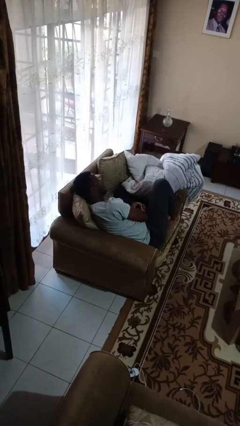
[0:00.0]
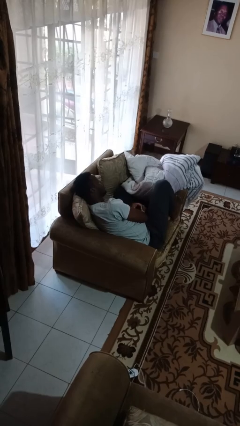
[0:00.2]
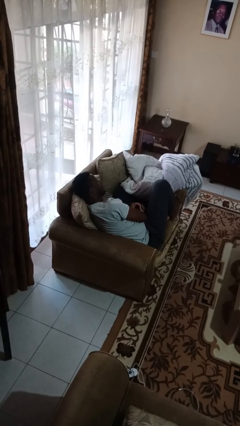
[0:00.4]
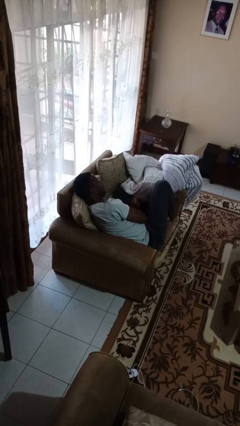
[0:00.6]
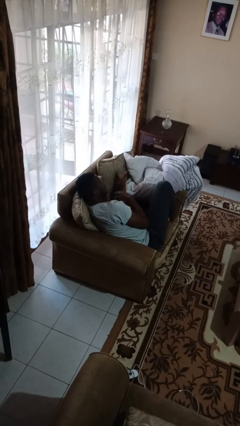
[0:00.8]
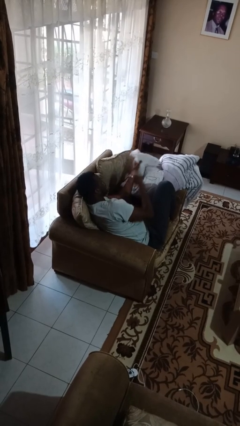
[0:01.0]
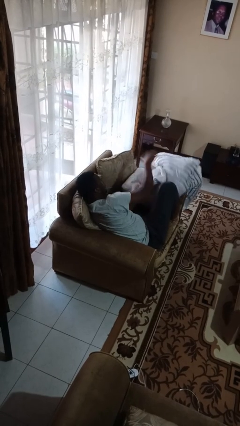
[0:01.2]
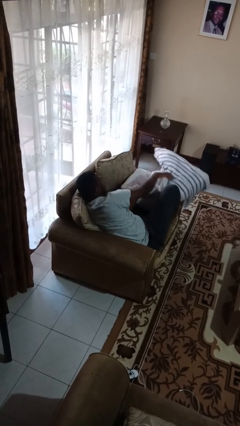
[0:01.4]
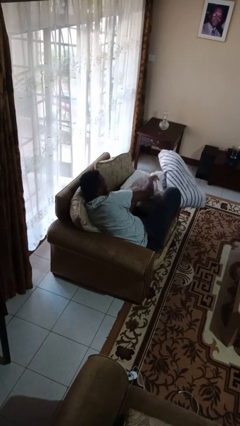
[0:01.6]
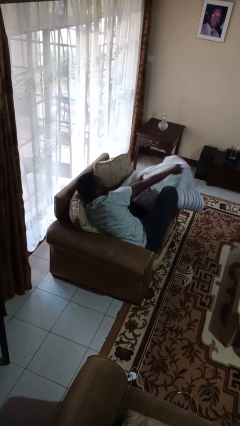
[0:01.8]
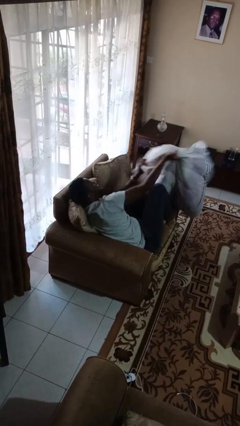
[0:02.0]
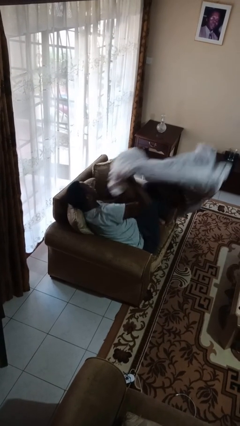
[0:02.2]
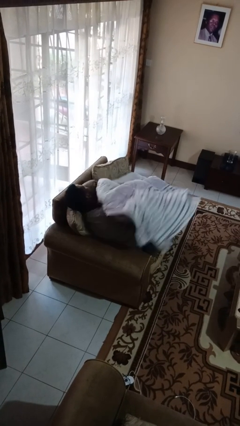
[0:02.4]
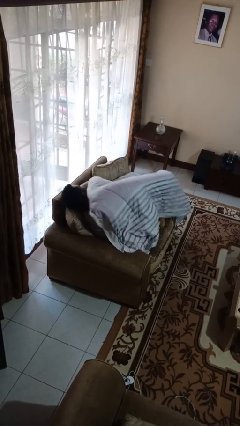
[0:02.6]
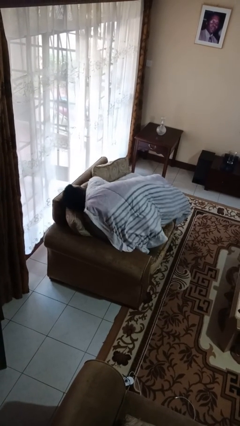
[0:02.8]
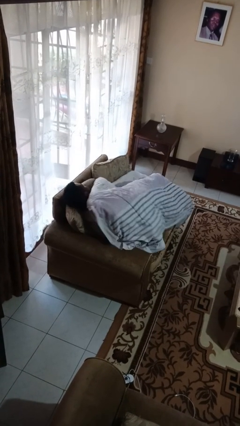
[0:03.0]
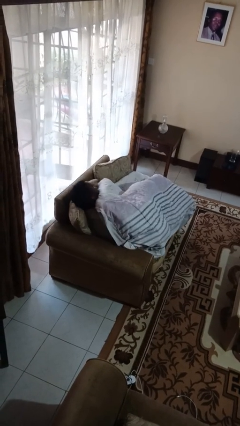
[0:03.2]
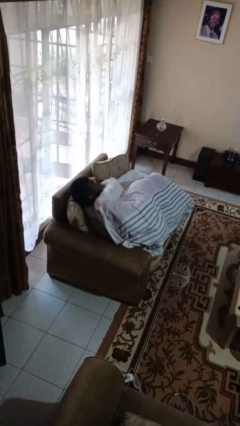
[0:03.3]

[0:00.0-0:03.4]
person covers with blanket

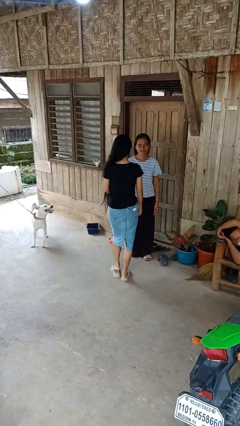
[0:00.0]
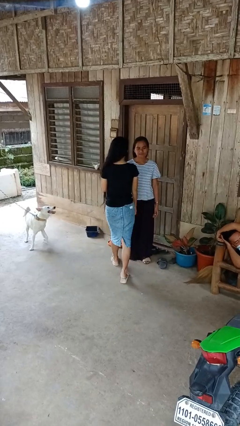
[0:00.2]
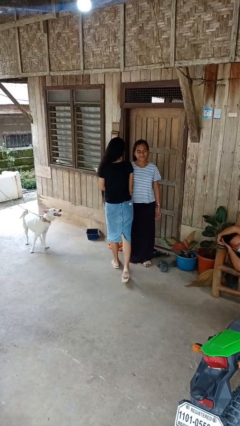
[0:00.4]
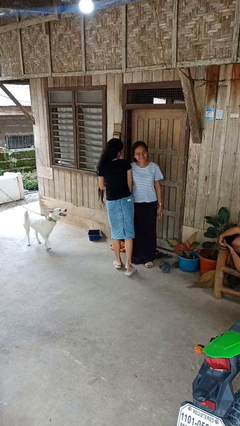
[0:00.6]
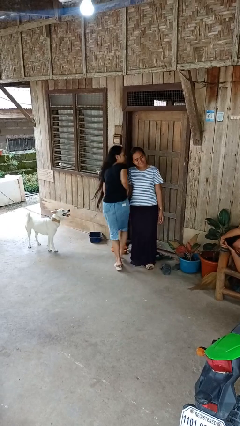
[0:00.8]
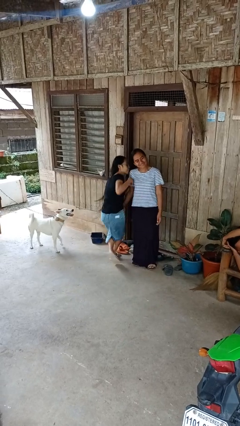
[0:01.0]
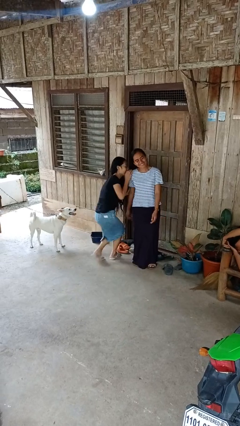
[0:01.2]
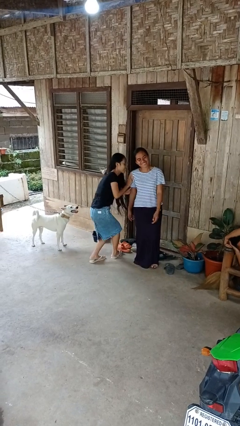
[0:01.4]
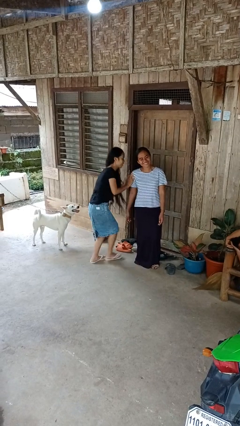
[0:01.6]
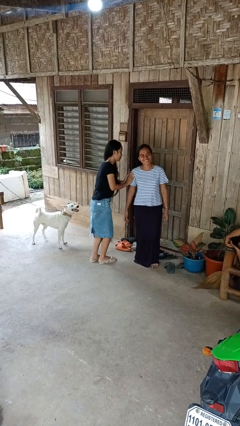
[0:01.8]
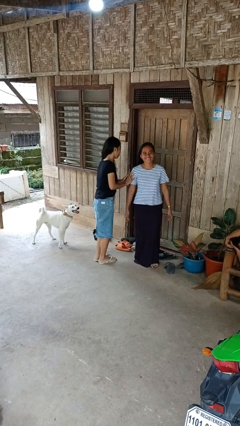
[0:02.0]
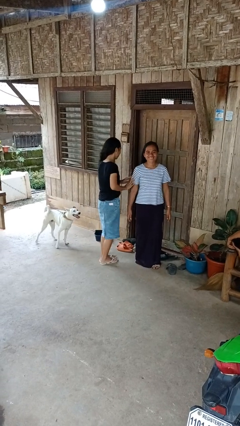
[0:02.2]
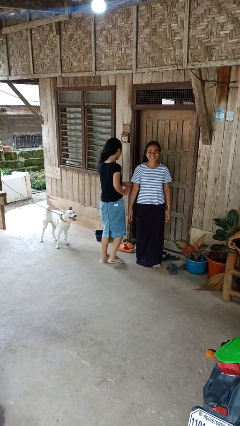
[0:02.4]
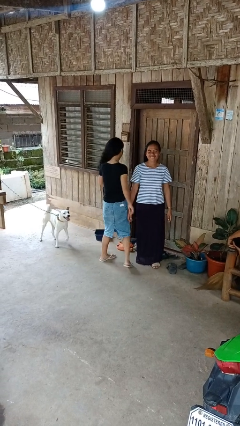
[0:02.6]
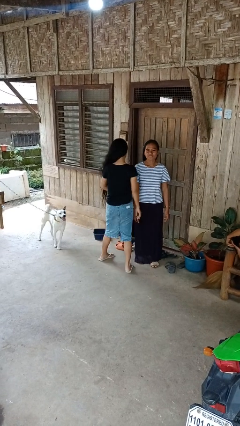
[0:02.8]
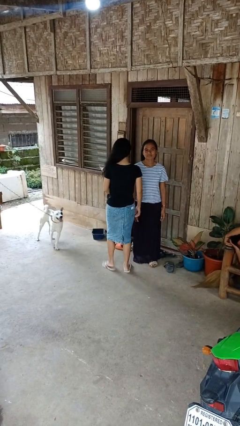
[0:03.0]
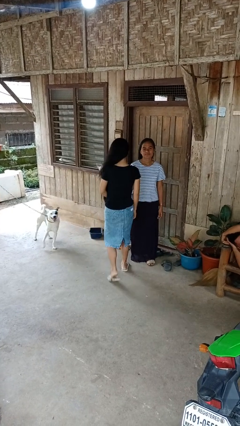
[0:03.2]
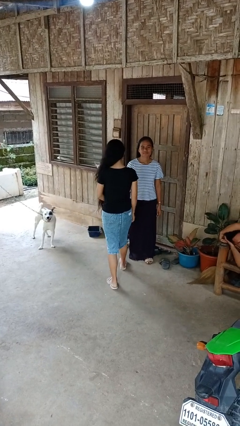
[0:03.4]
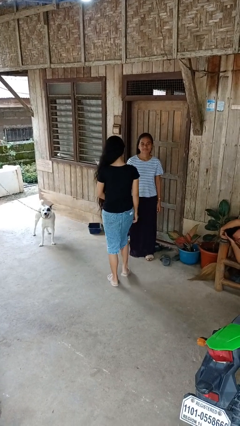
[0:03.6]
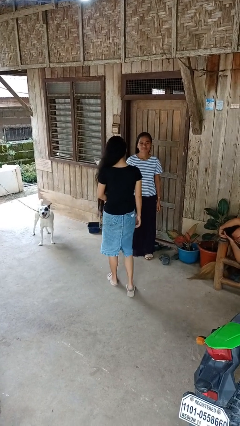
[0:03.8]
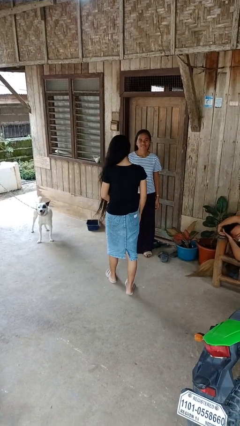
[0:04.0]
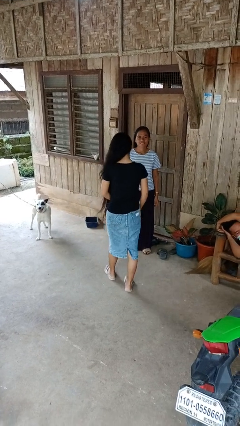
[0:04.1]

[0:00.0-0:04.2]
person bumps into person

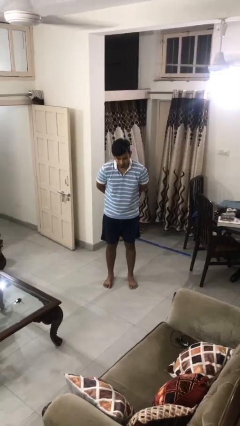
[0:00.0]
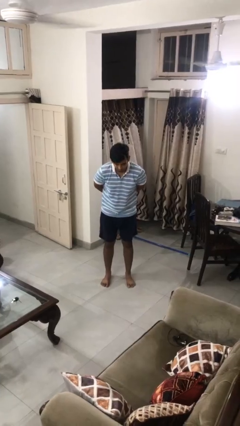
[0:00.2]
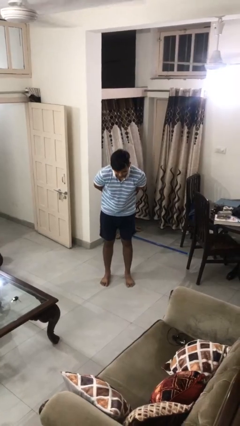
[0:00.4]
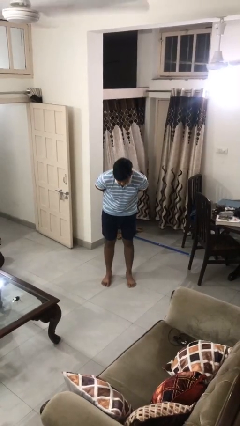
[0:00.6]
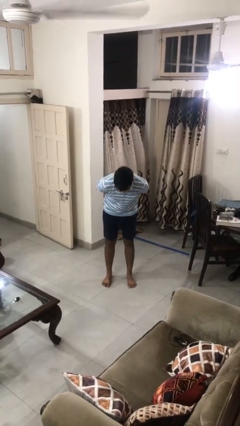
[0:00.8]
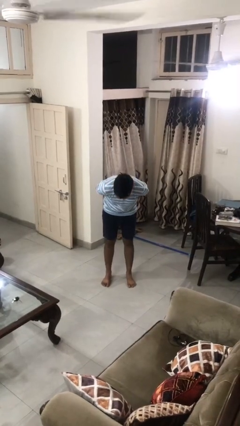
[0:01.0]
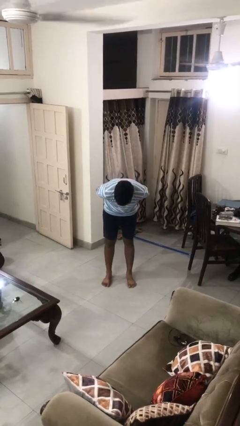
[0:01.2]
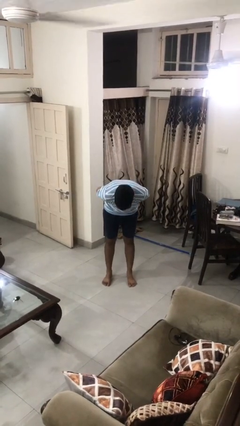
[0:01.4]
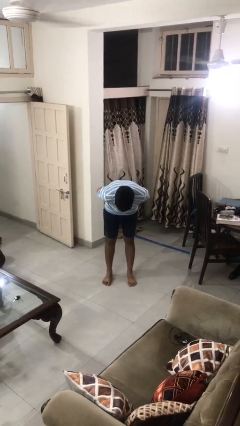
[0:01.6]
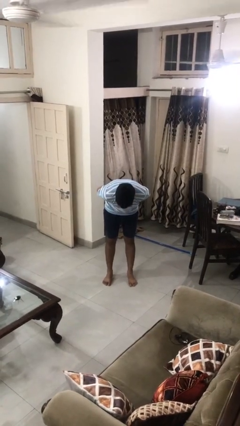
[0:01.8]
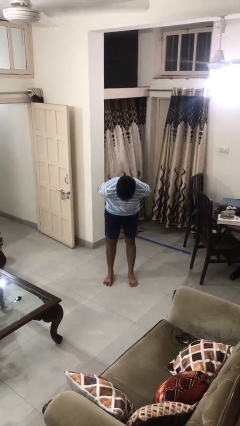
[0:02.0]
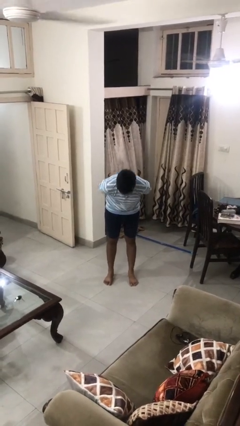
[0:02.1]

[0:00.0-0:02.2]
person bows

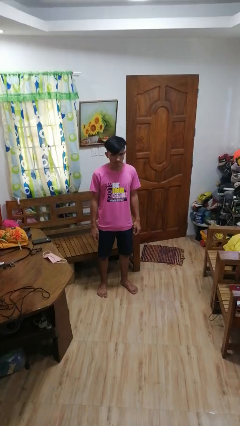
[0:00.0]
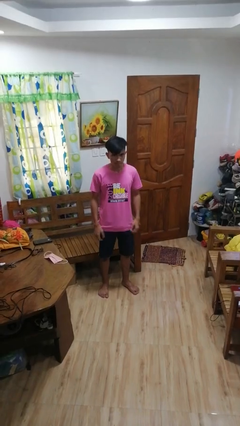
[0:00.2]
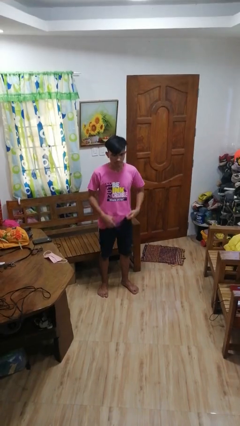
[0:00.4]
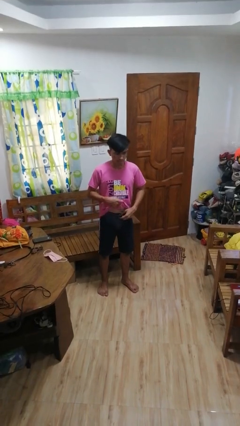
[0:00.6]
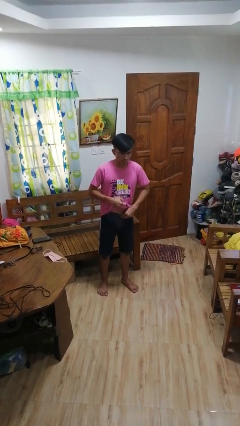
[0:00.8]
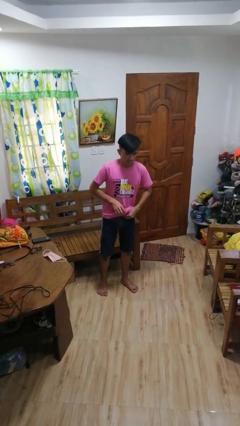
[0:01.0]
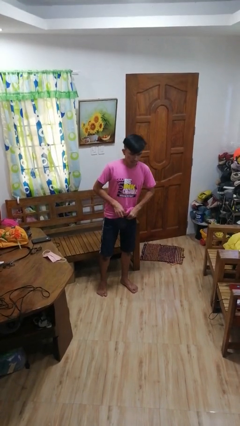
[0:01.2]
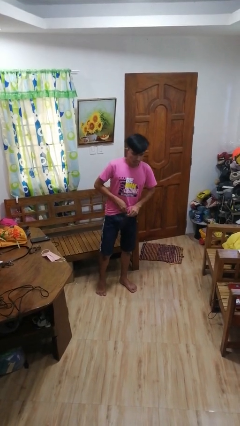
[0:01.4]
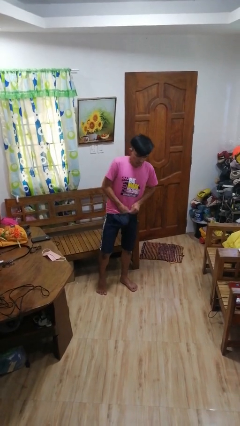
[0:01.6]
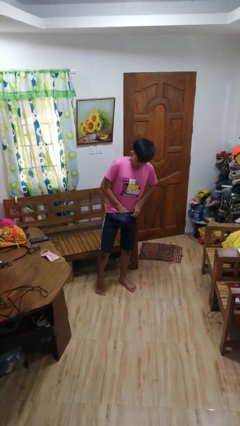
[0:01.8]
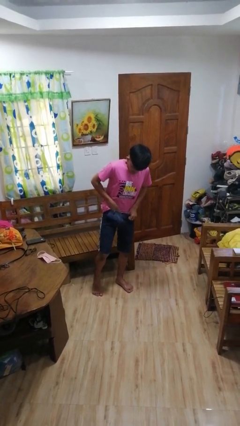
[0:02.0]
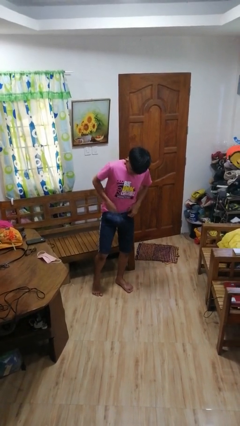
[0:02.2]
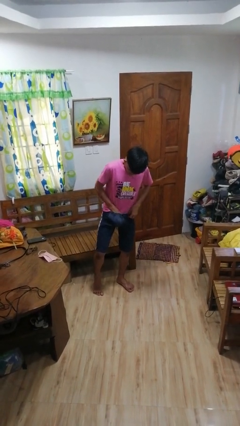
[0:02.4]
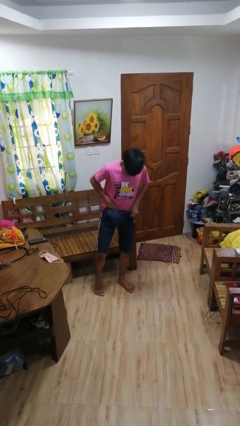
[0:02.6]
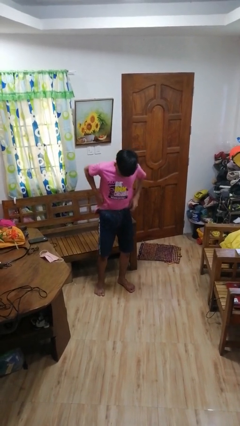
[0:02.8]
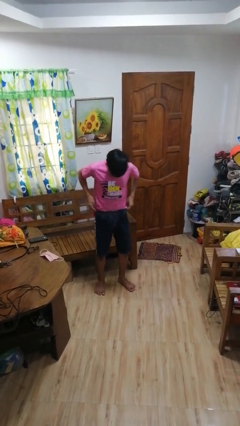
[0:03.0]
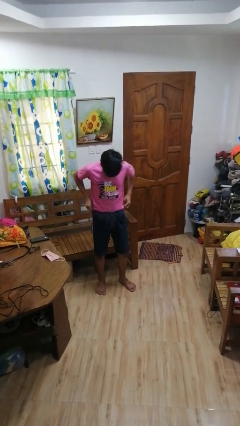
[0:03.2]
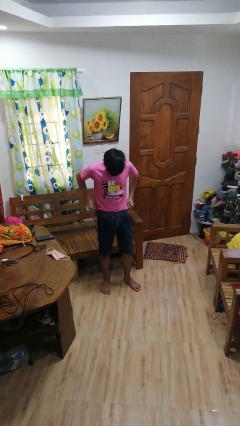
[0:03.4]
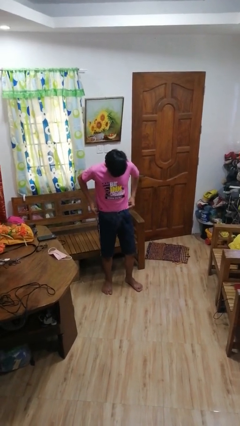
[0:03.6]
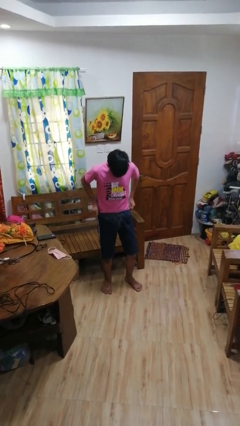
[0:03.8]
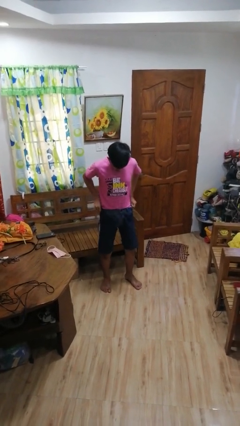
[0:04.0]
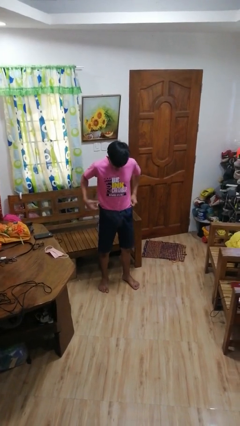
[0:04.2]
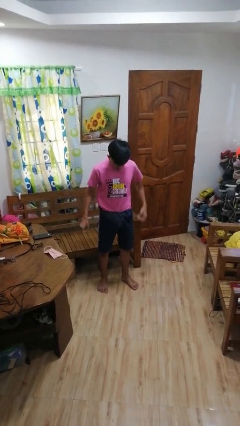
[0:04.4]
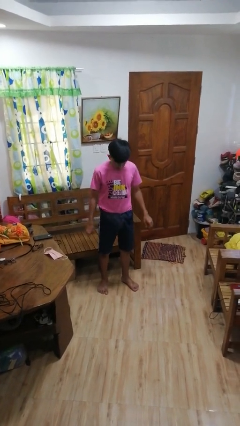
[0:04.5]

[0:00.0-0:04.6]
person tucks in shirt

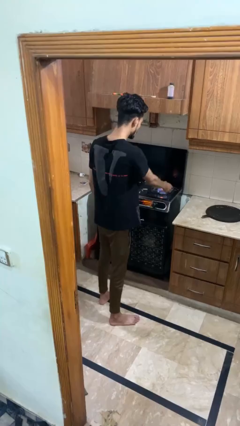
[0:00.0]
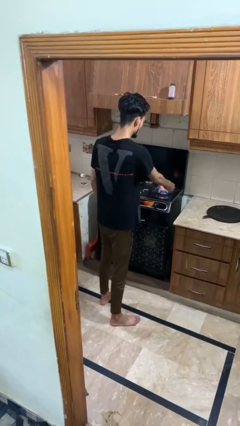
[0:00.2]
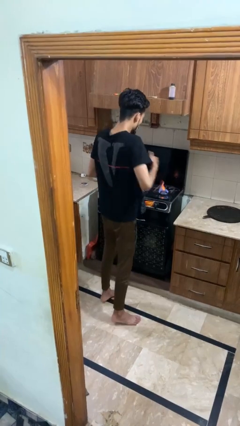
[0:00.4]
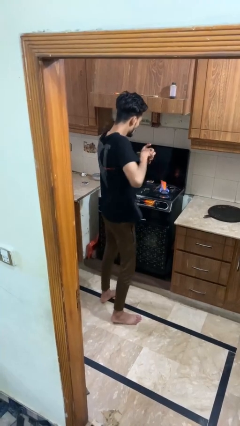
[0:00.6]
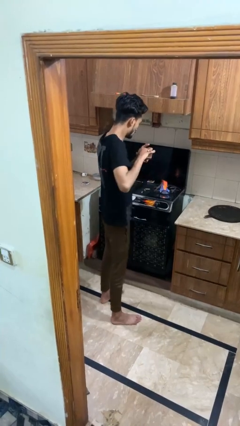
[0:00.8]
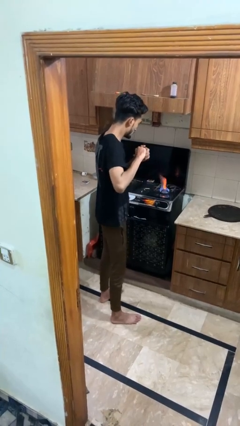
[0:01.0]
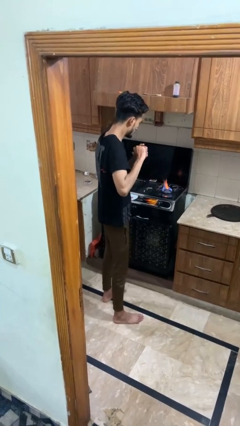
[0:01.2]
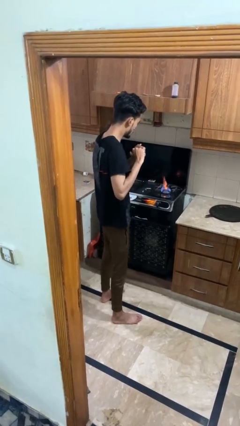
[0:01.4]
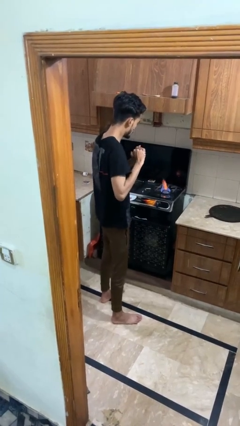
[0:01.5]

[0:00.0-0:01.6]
person burns hand

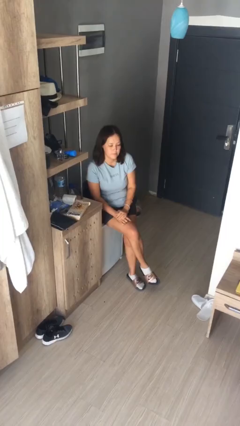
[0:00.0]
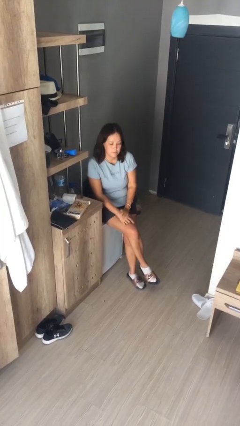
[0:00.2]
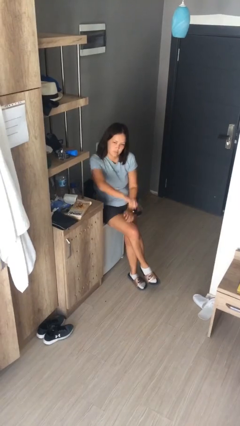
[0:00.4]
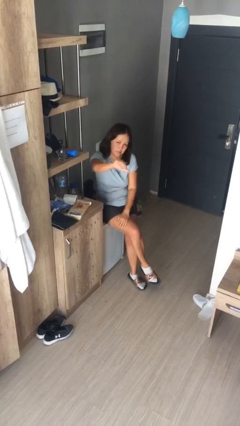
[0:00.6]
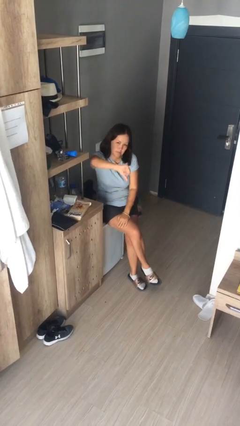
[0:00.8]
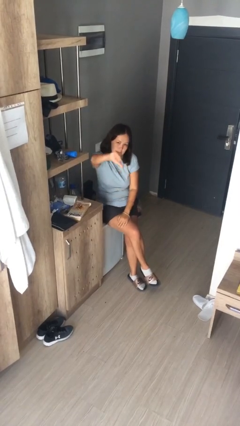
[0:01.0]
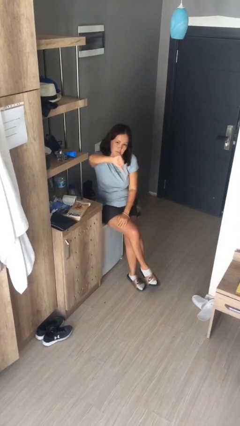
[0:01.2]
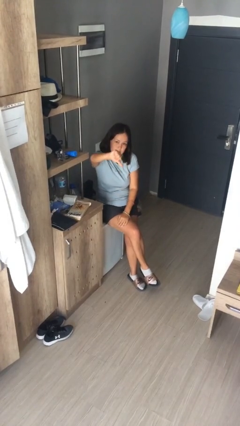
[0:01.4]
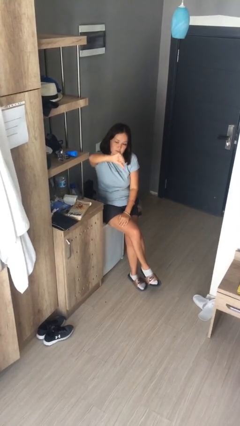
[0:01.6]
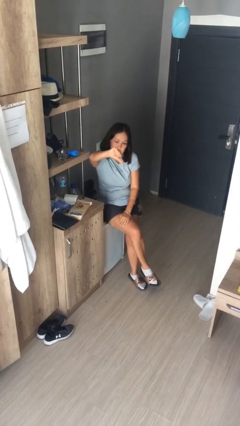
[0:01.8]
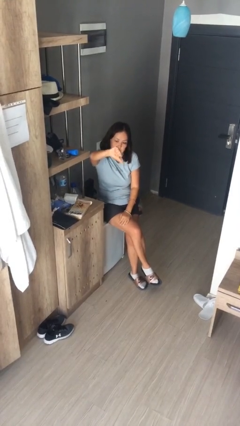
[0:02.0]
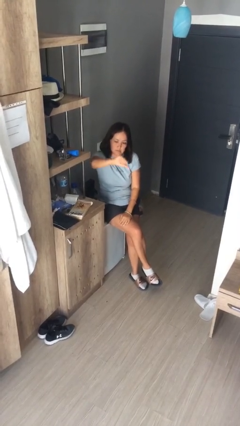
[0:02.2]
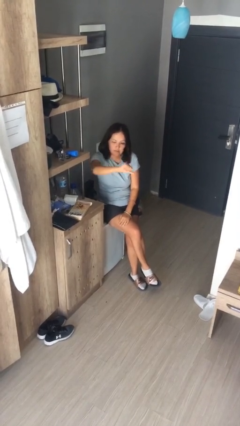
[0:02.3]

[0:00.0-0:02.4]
person gestures thumbs down
